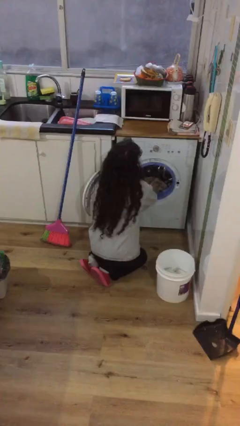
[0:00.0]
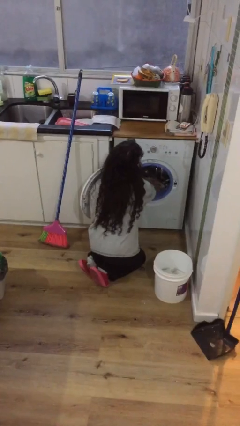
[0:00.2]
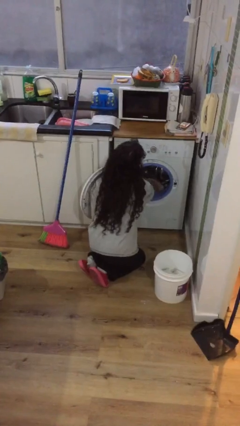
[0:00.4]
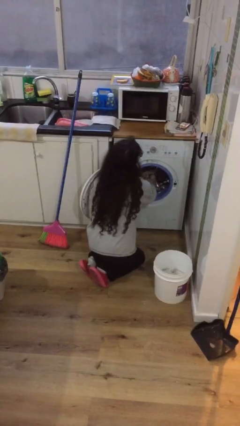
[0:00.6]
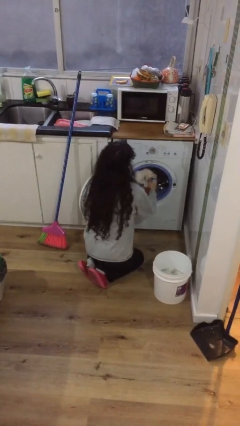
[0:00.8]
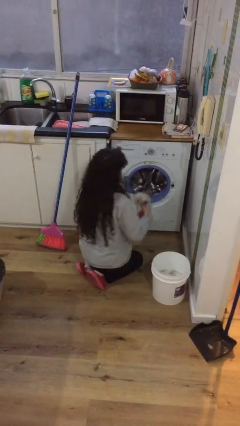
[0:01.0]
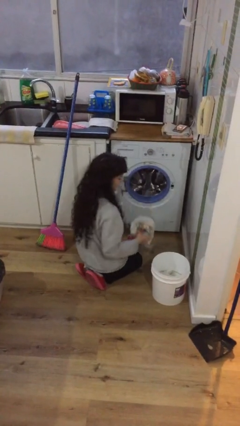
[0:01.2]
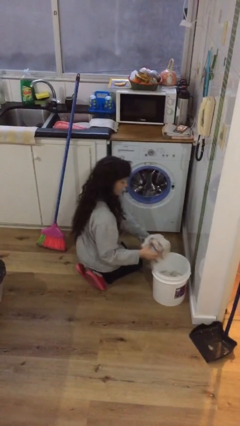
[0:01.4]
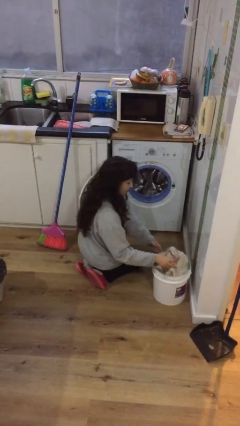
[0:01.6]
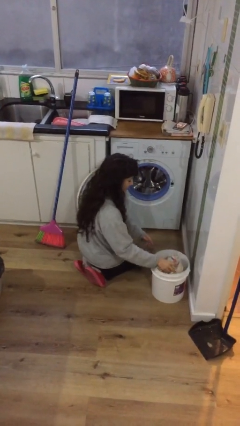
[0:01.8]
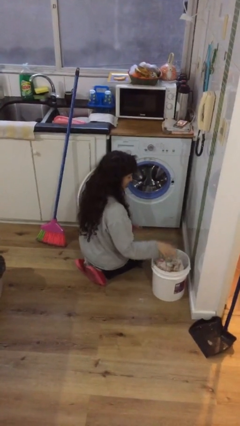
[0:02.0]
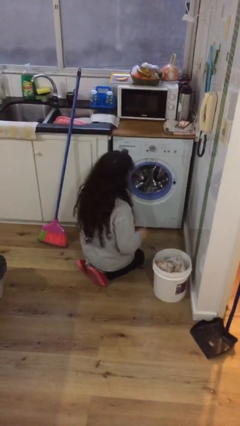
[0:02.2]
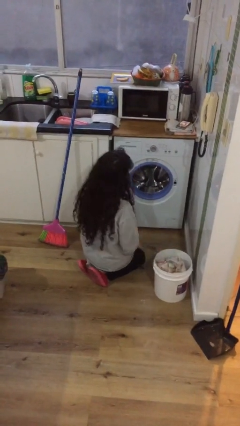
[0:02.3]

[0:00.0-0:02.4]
person unloads dryer

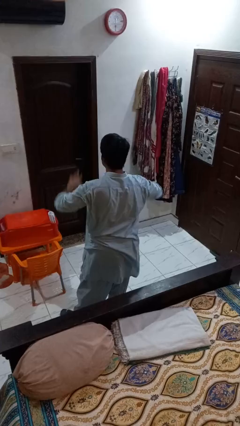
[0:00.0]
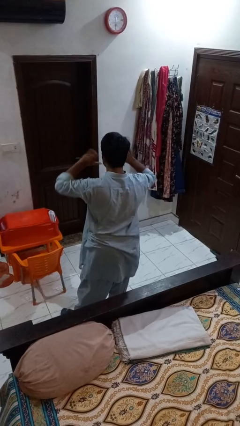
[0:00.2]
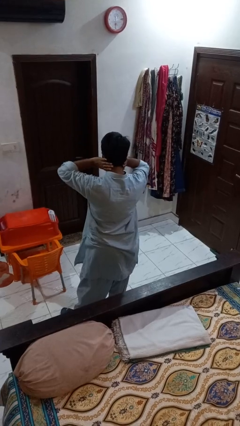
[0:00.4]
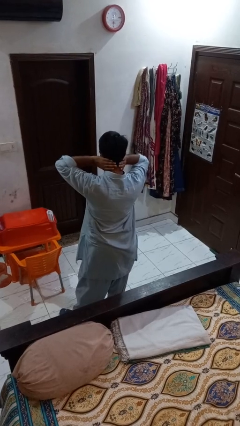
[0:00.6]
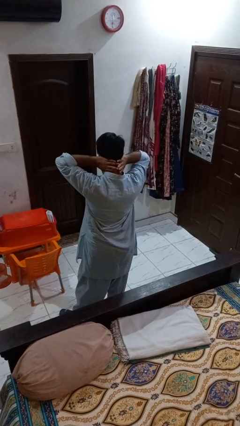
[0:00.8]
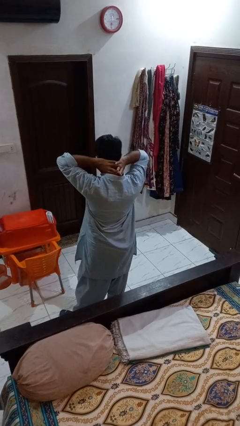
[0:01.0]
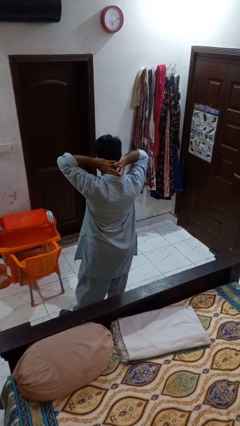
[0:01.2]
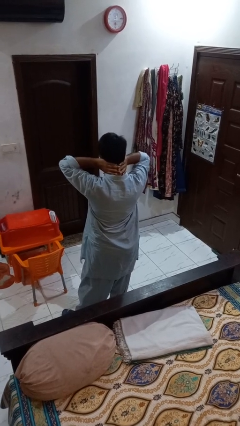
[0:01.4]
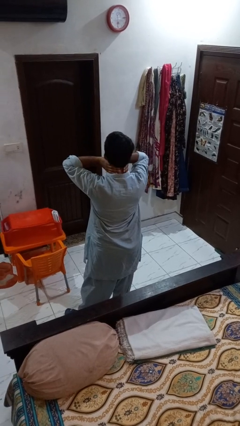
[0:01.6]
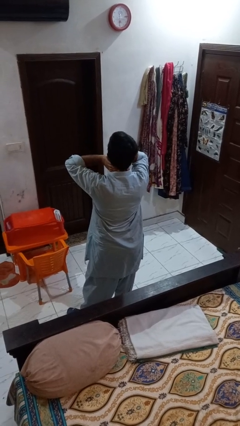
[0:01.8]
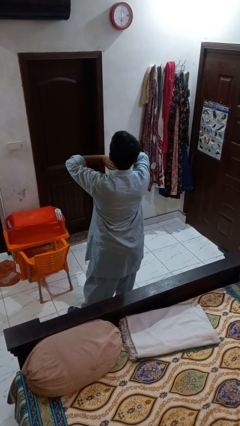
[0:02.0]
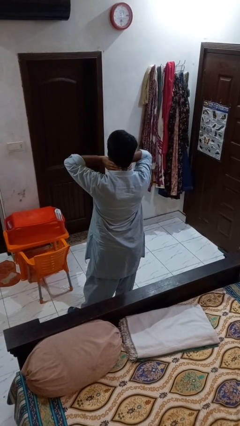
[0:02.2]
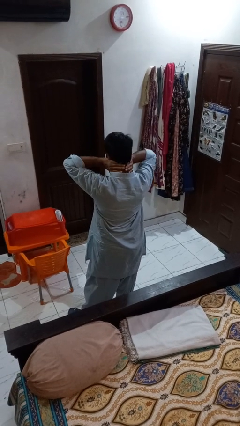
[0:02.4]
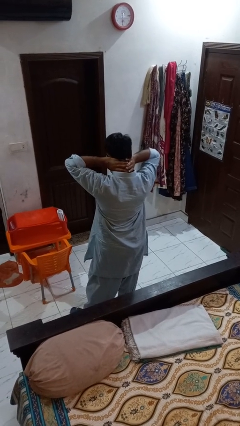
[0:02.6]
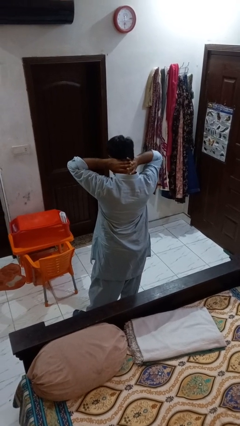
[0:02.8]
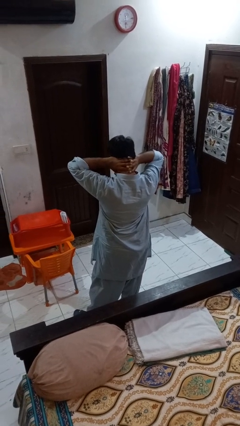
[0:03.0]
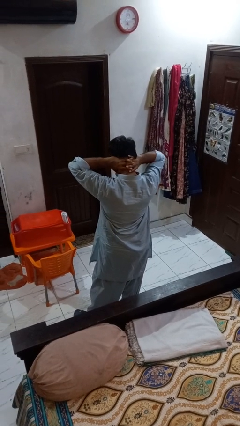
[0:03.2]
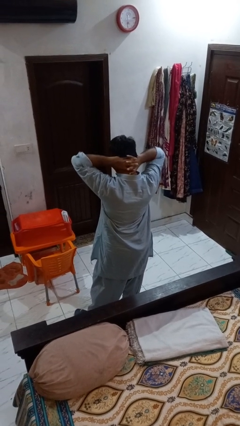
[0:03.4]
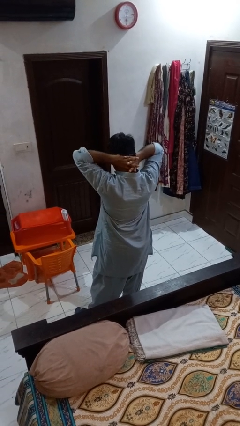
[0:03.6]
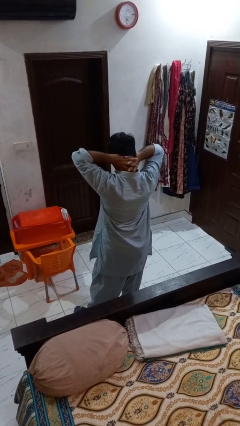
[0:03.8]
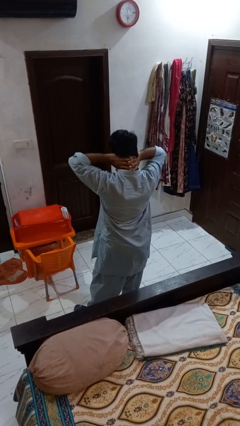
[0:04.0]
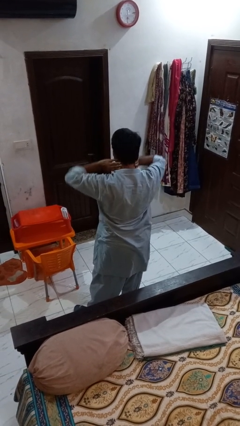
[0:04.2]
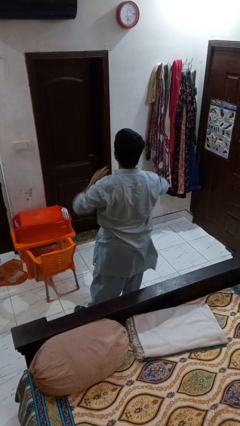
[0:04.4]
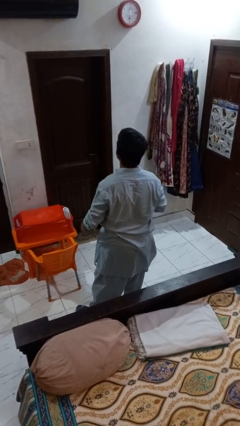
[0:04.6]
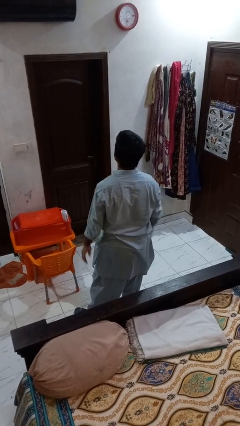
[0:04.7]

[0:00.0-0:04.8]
person rubs neck

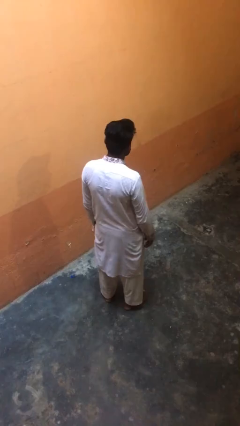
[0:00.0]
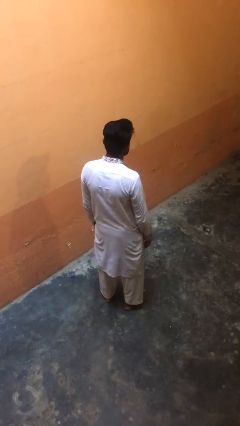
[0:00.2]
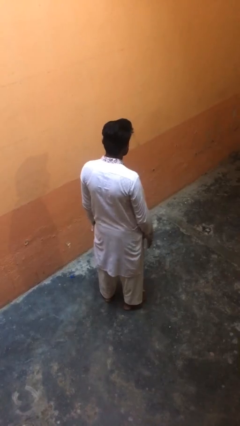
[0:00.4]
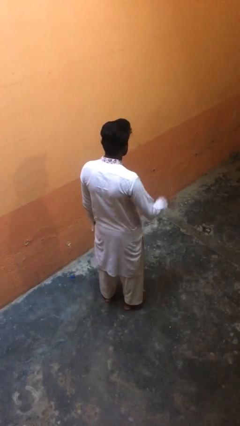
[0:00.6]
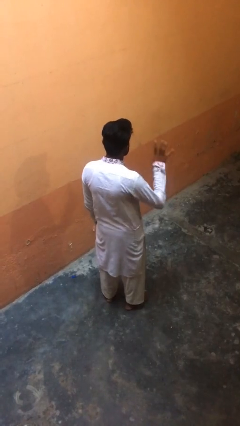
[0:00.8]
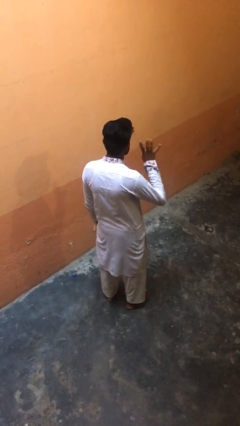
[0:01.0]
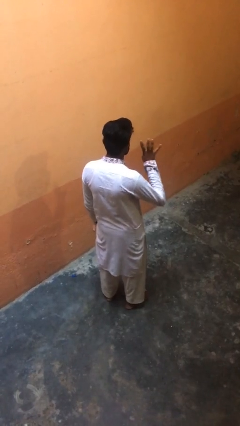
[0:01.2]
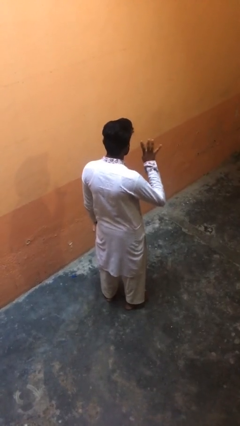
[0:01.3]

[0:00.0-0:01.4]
person gestures number four

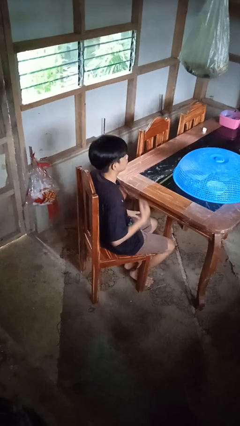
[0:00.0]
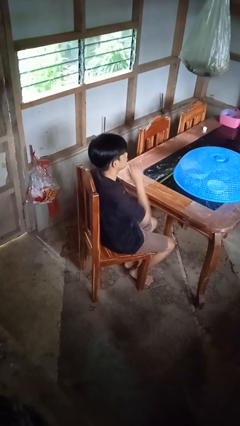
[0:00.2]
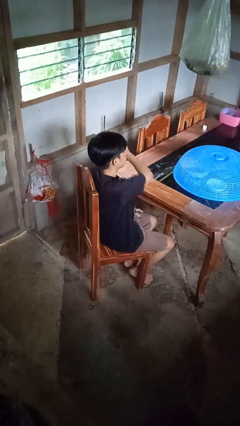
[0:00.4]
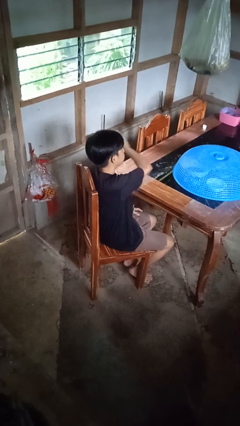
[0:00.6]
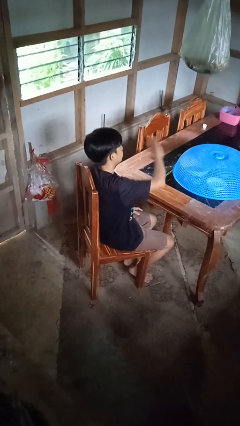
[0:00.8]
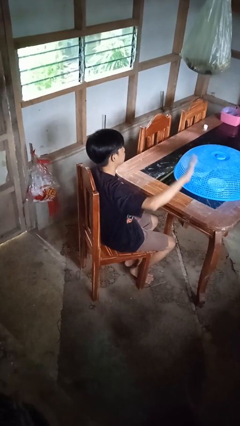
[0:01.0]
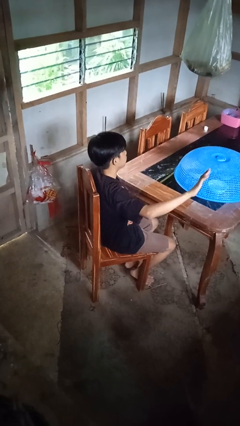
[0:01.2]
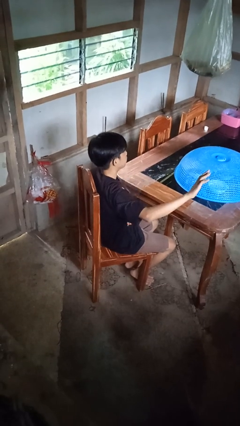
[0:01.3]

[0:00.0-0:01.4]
person gestures swipe left

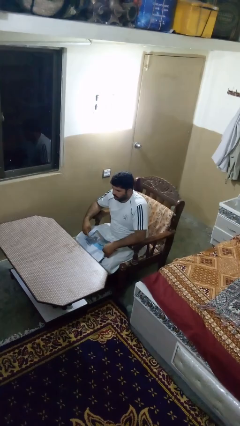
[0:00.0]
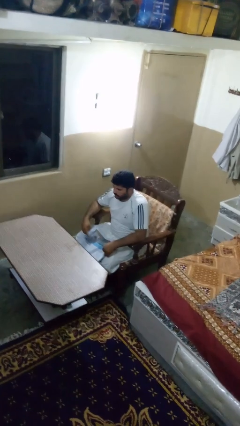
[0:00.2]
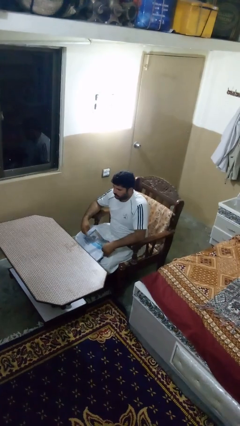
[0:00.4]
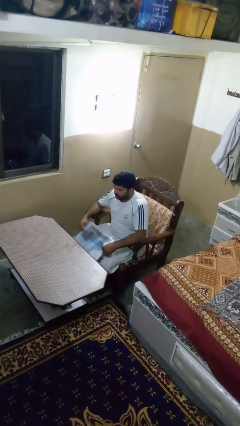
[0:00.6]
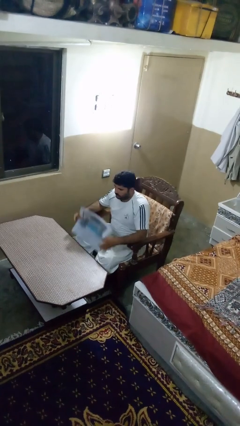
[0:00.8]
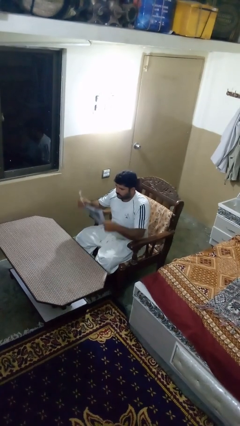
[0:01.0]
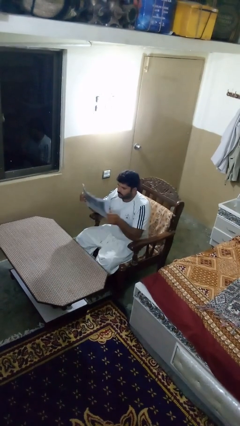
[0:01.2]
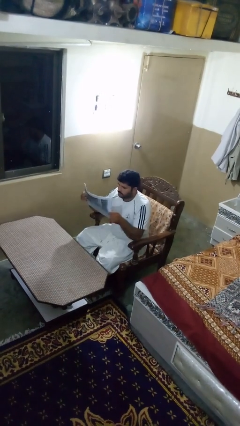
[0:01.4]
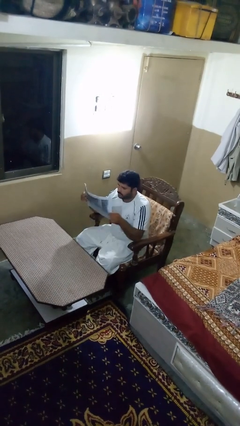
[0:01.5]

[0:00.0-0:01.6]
person reads newspaper

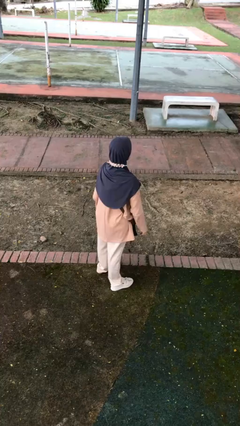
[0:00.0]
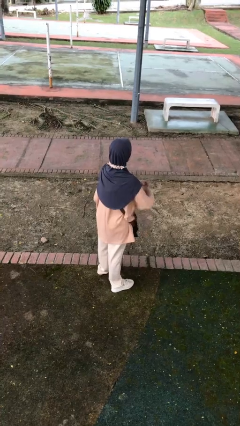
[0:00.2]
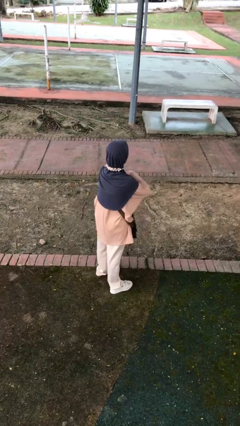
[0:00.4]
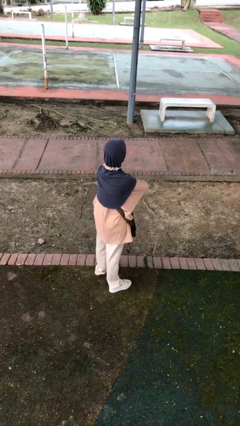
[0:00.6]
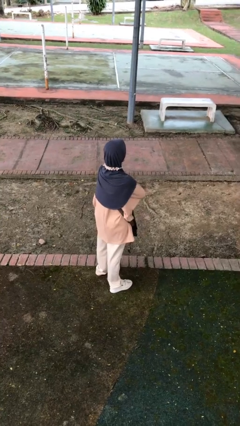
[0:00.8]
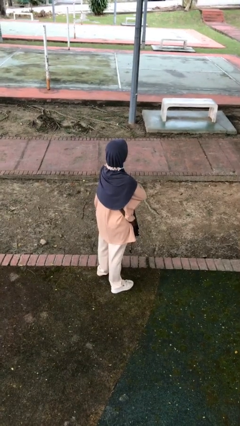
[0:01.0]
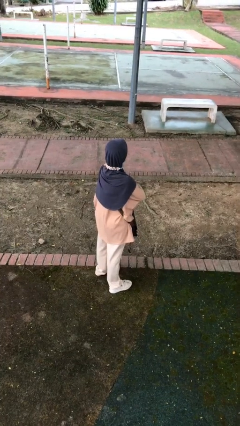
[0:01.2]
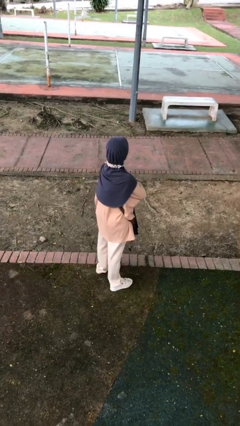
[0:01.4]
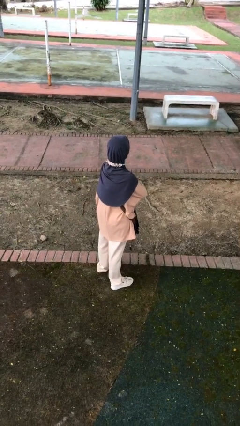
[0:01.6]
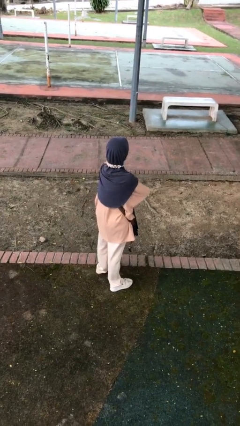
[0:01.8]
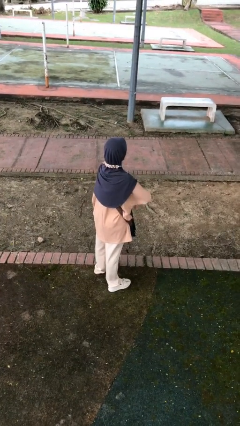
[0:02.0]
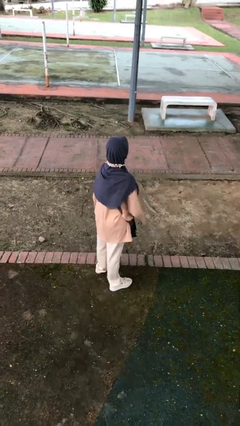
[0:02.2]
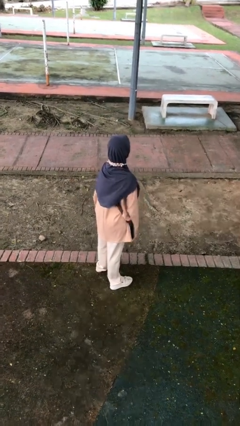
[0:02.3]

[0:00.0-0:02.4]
person crosses arms

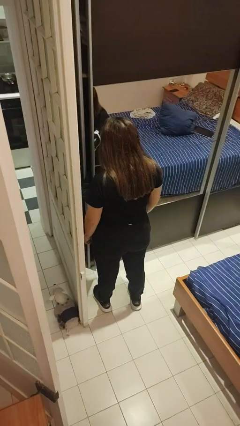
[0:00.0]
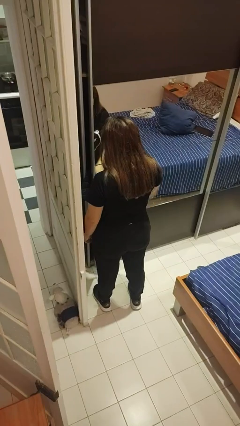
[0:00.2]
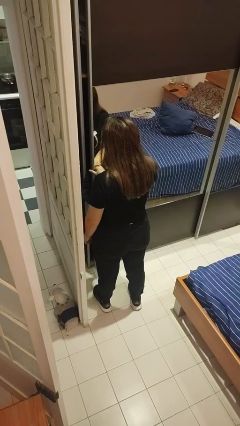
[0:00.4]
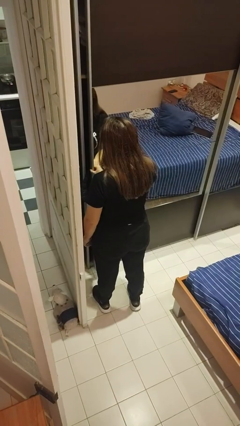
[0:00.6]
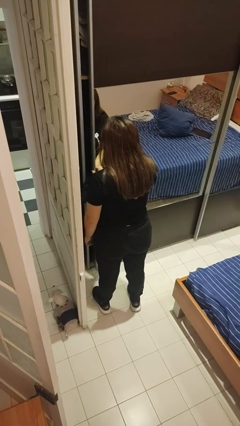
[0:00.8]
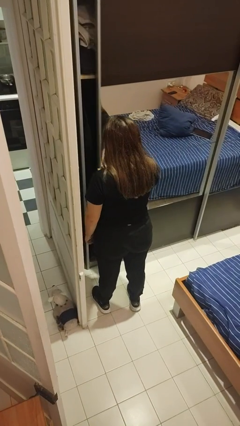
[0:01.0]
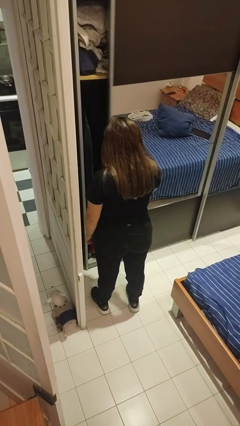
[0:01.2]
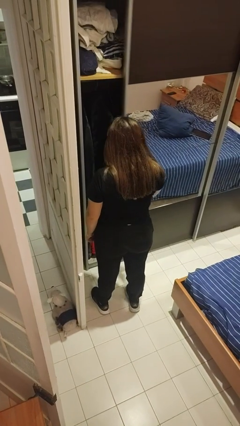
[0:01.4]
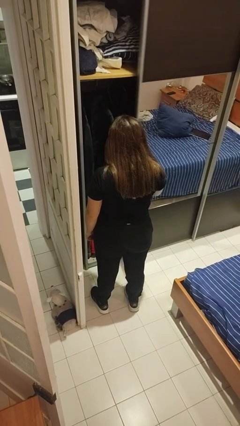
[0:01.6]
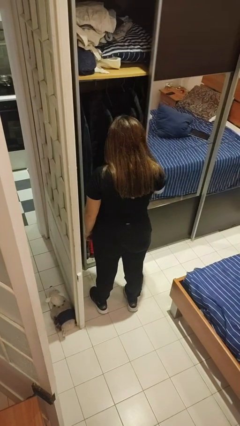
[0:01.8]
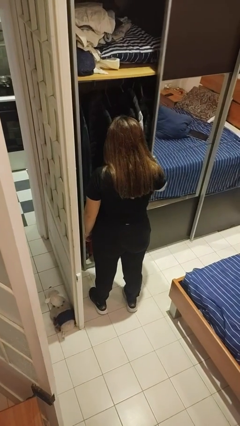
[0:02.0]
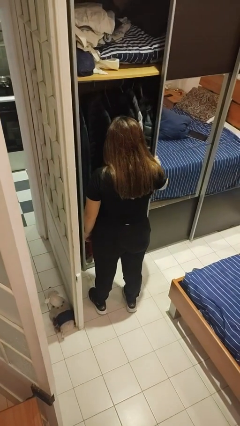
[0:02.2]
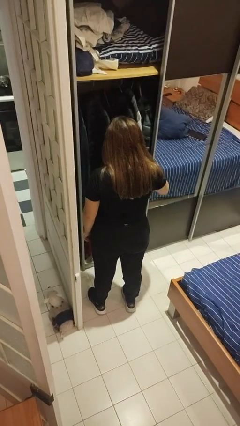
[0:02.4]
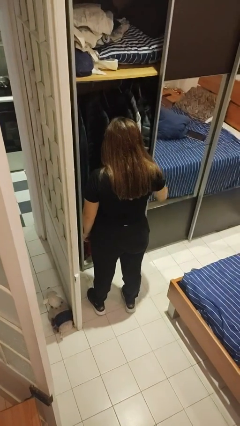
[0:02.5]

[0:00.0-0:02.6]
person opens dresser drawer
